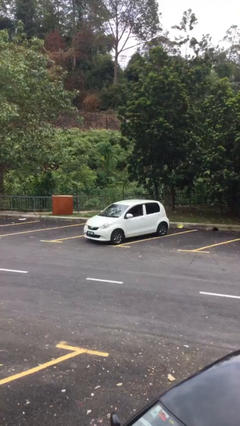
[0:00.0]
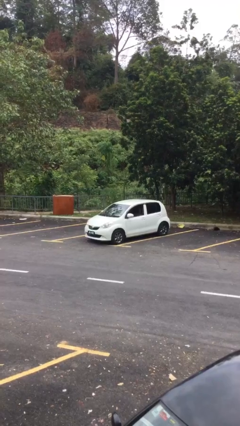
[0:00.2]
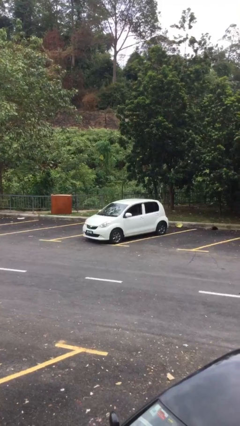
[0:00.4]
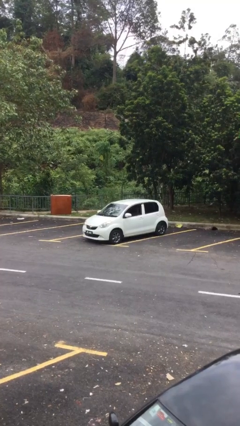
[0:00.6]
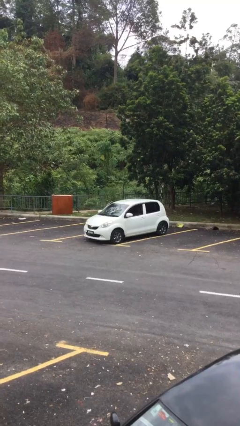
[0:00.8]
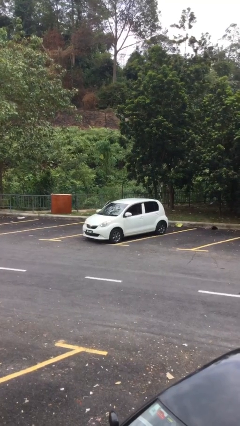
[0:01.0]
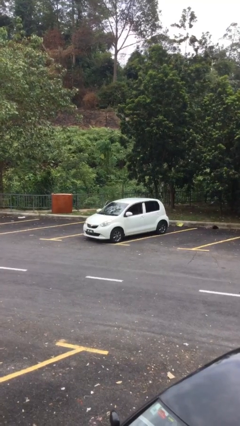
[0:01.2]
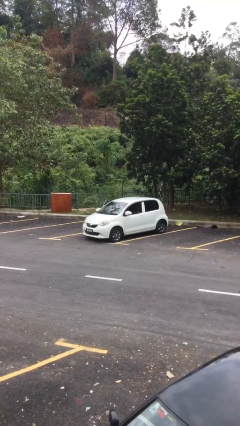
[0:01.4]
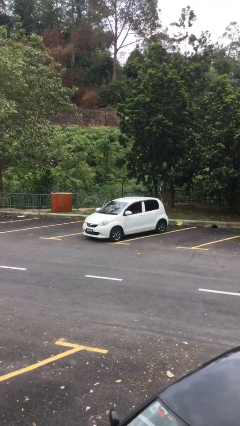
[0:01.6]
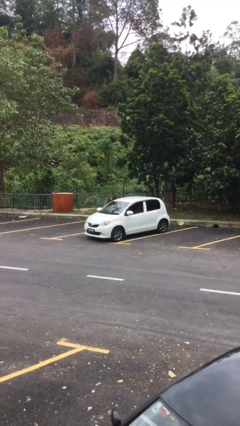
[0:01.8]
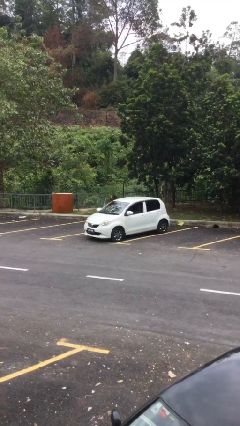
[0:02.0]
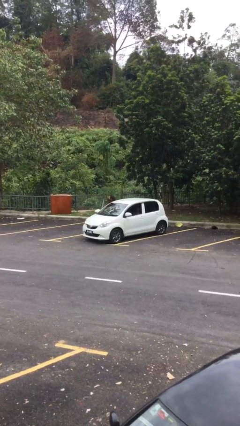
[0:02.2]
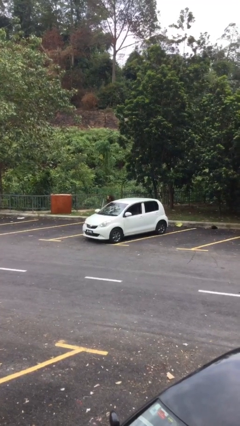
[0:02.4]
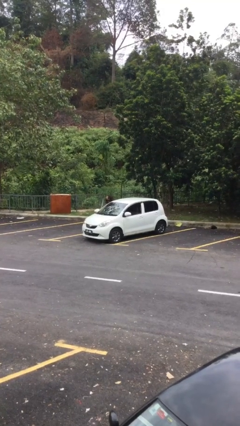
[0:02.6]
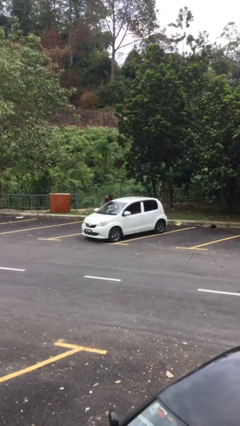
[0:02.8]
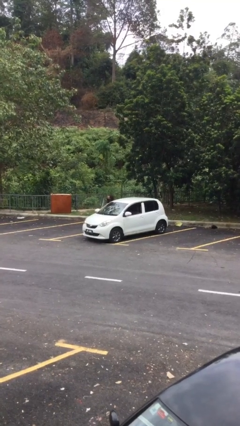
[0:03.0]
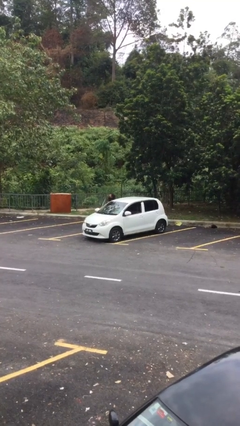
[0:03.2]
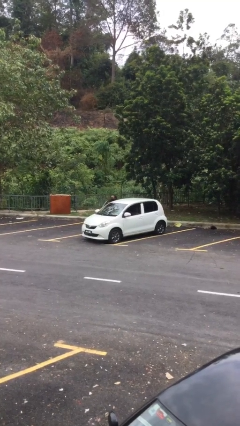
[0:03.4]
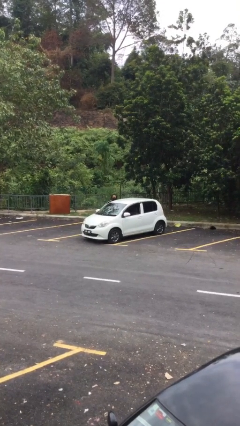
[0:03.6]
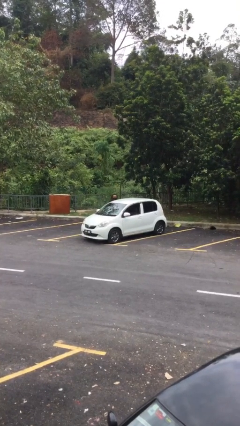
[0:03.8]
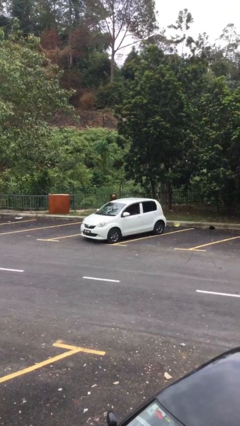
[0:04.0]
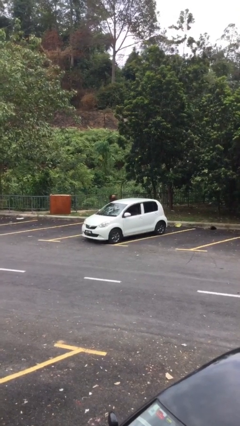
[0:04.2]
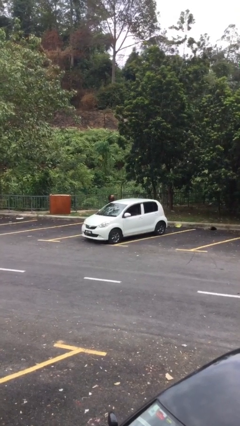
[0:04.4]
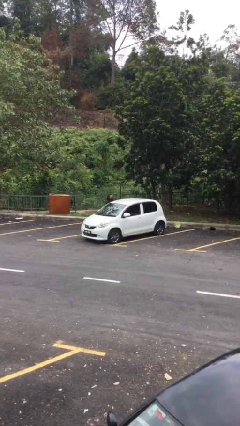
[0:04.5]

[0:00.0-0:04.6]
car drops off person

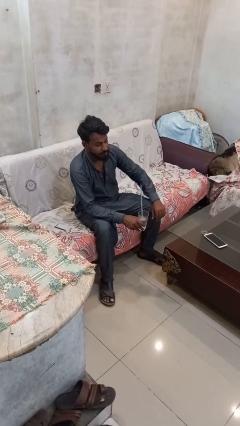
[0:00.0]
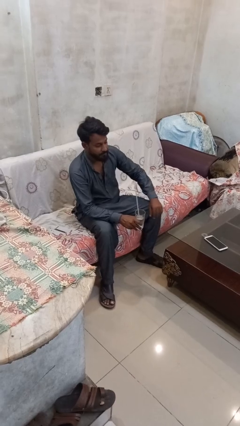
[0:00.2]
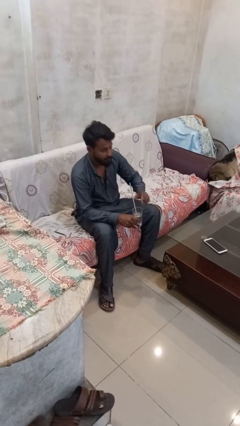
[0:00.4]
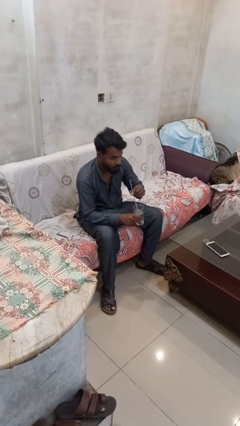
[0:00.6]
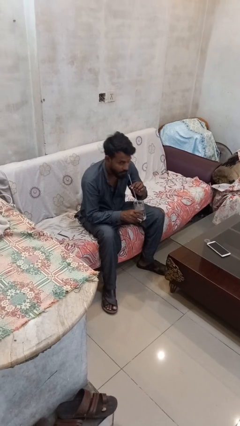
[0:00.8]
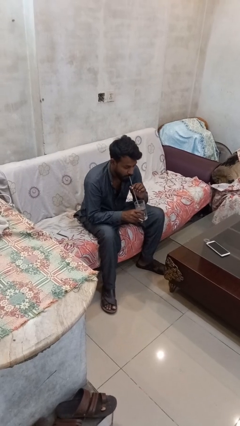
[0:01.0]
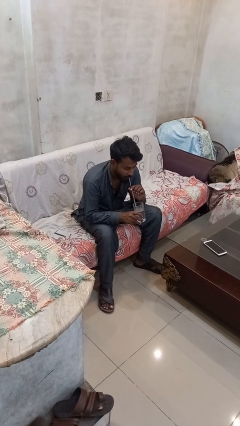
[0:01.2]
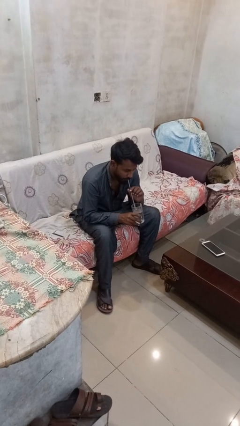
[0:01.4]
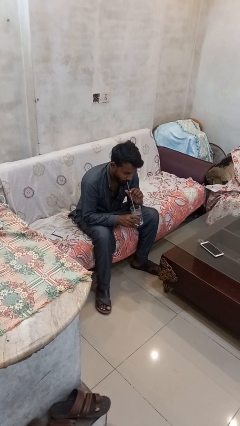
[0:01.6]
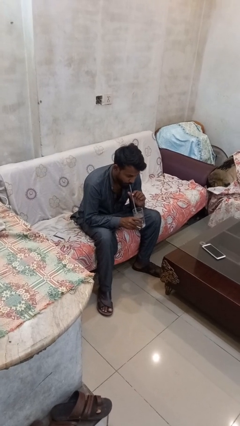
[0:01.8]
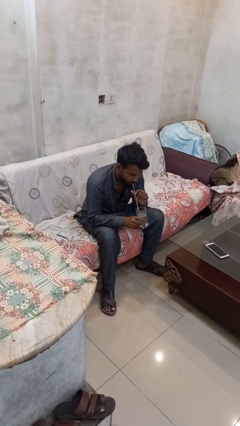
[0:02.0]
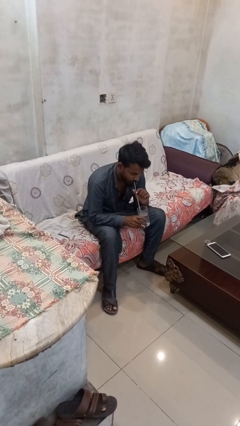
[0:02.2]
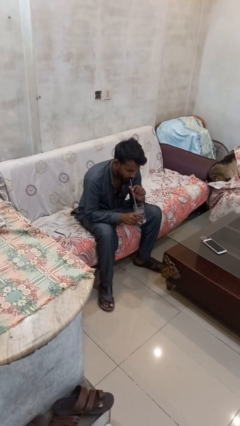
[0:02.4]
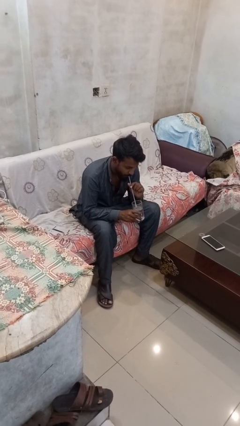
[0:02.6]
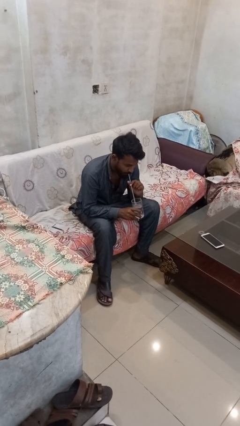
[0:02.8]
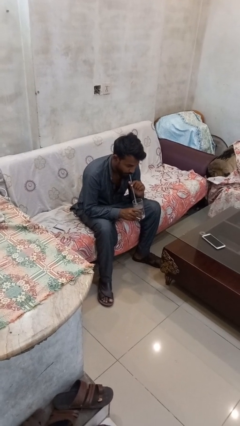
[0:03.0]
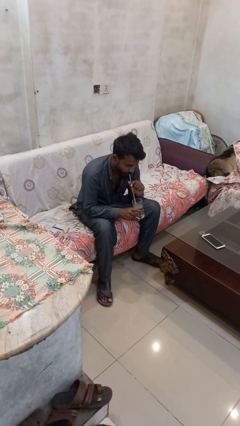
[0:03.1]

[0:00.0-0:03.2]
person drinks from straw

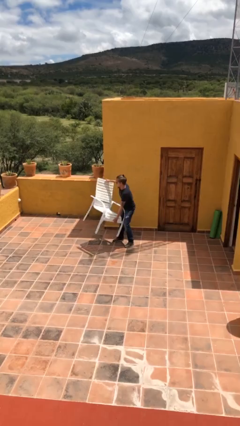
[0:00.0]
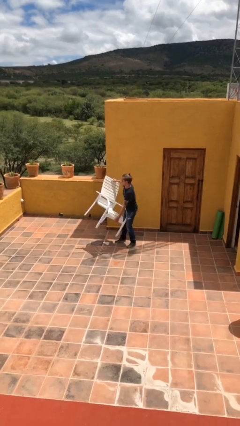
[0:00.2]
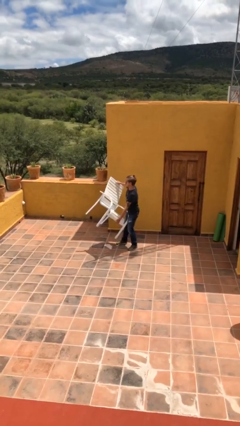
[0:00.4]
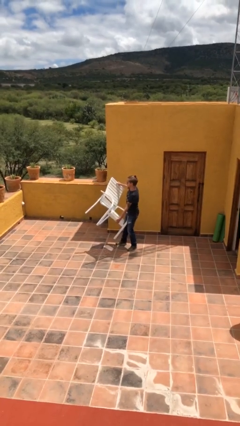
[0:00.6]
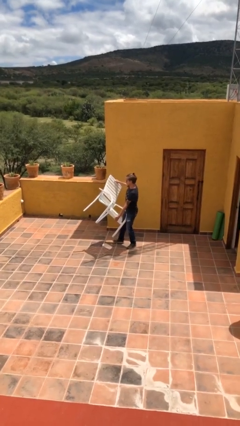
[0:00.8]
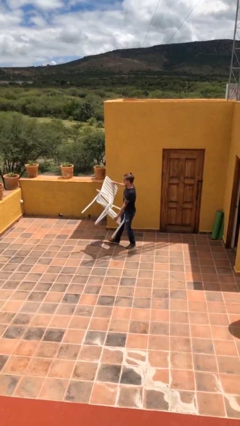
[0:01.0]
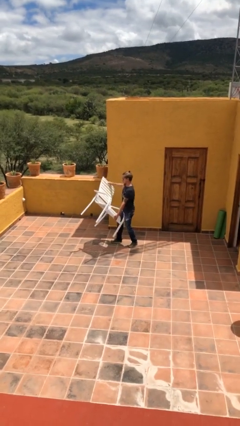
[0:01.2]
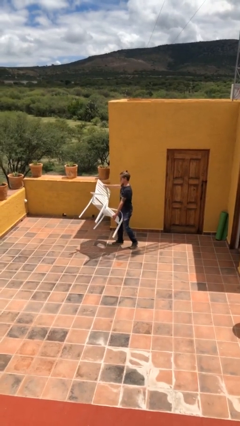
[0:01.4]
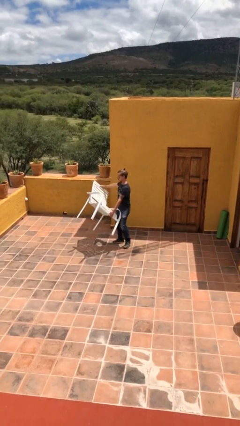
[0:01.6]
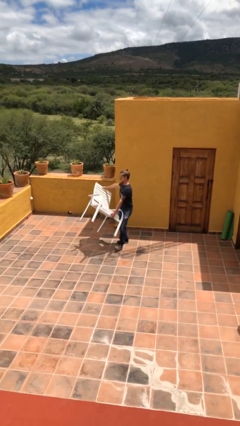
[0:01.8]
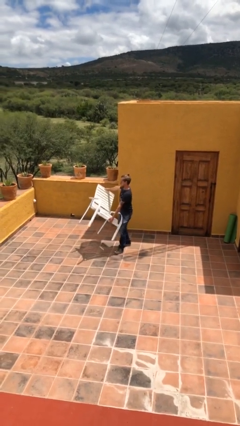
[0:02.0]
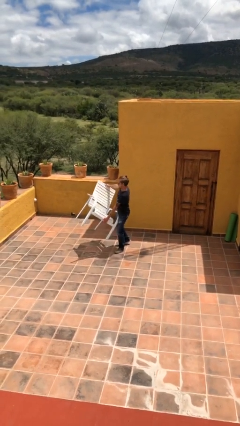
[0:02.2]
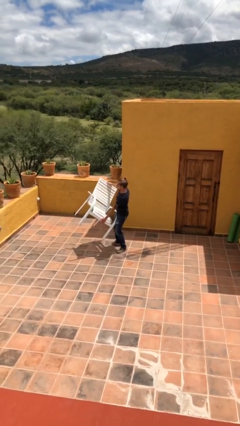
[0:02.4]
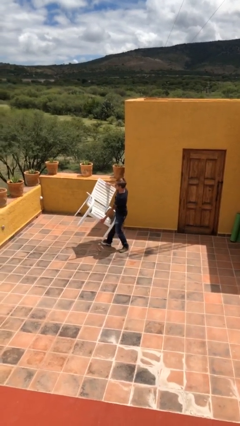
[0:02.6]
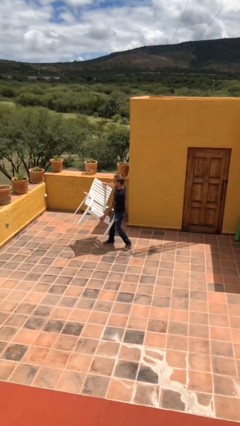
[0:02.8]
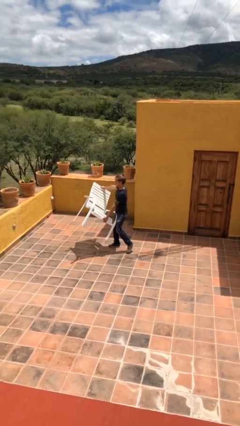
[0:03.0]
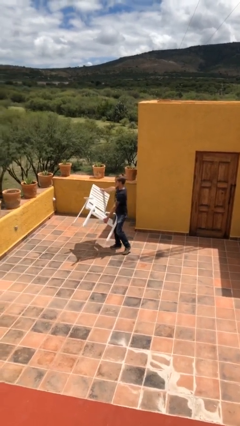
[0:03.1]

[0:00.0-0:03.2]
person carries heavy object

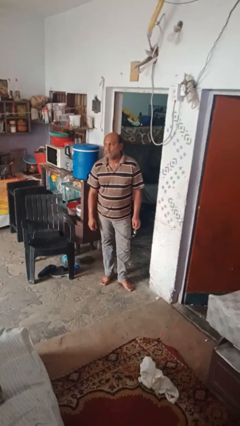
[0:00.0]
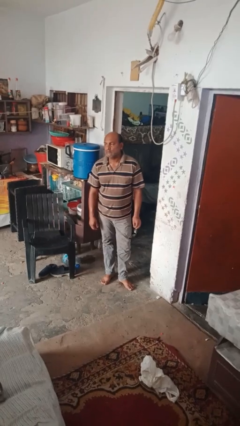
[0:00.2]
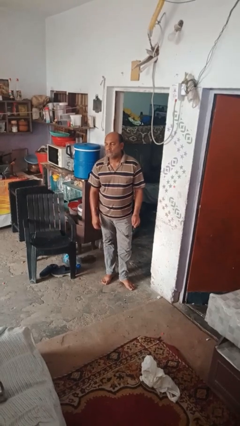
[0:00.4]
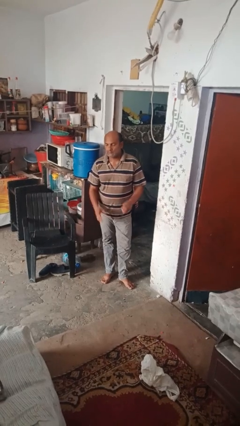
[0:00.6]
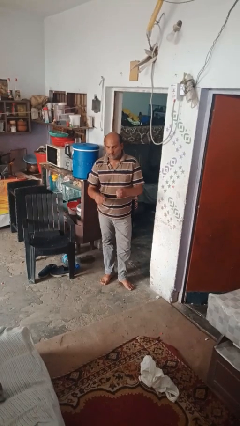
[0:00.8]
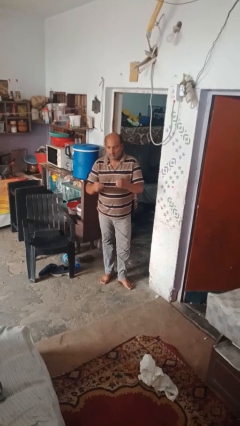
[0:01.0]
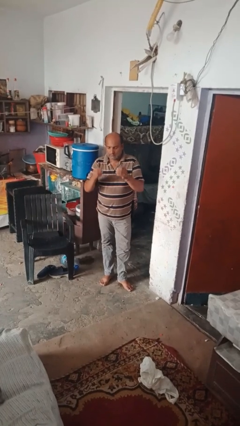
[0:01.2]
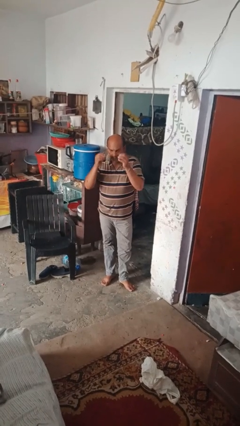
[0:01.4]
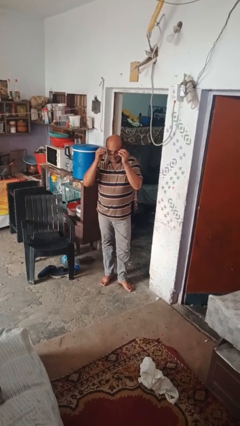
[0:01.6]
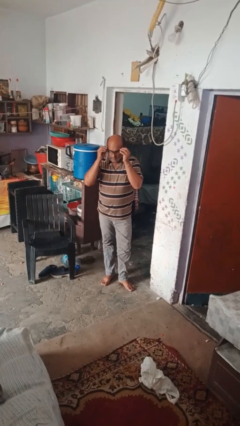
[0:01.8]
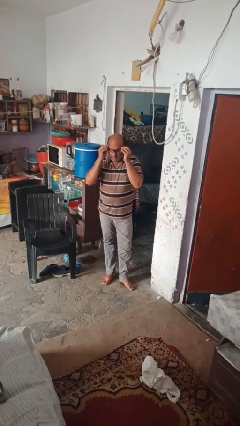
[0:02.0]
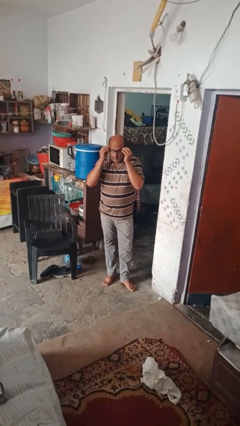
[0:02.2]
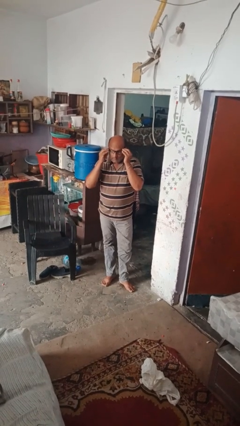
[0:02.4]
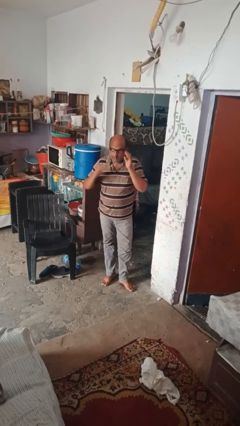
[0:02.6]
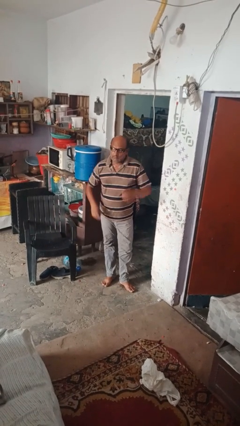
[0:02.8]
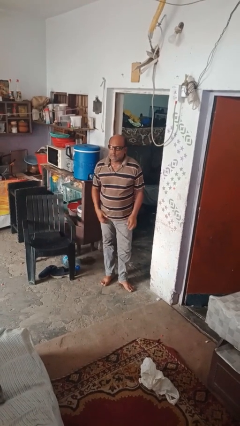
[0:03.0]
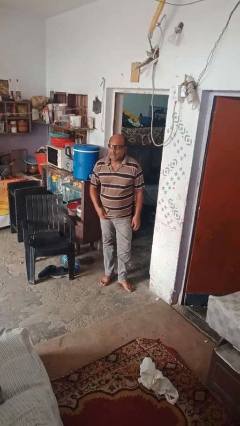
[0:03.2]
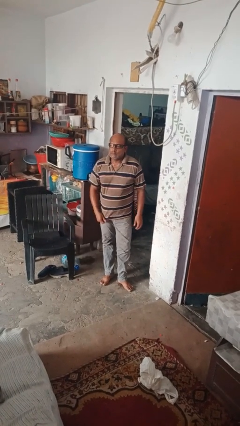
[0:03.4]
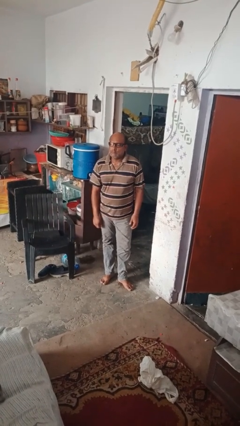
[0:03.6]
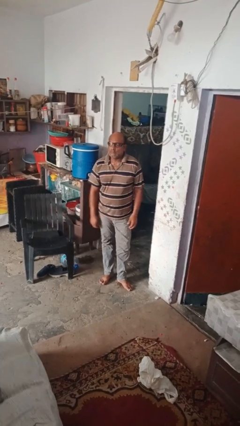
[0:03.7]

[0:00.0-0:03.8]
person puts on glasses

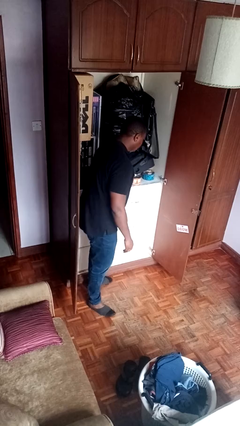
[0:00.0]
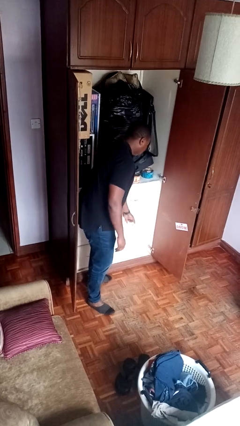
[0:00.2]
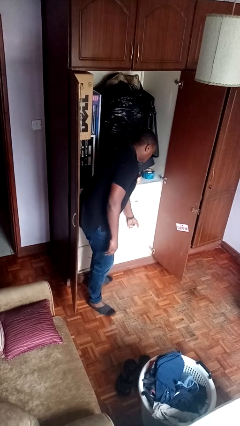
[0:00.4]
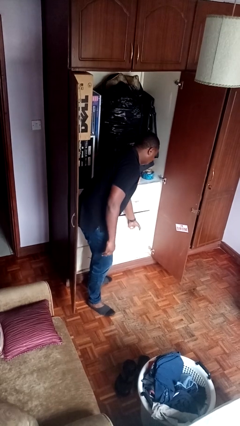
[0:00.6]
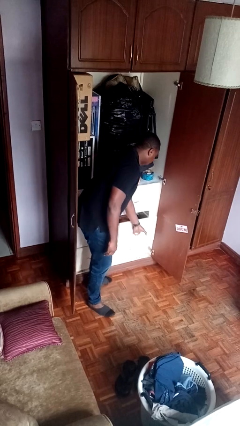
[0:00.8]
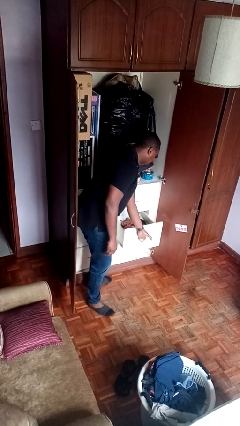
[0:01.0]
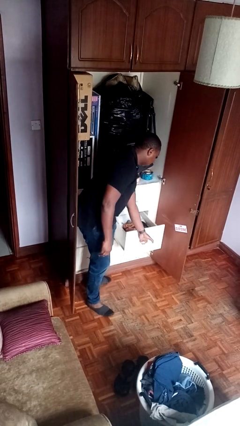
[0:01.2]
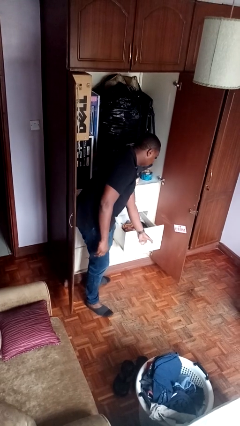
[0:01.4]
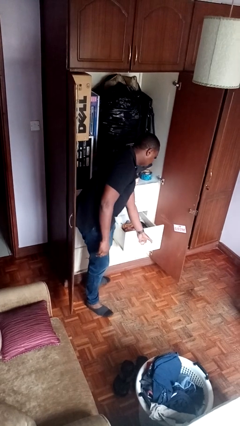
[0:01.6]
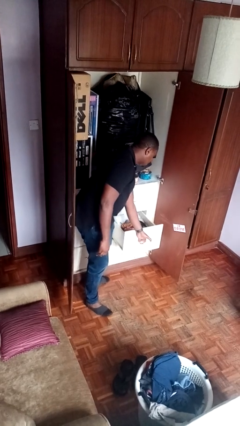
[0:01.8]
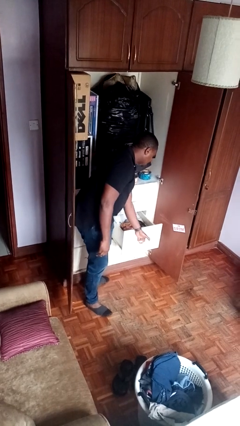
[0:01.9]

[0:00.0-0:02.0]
person opens dresser drawer

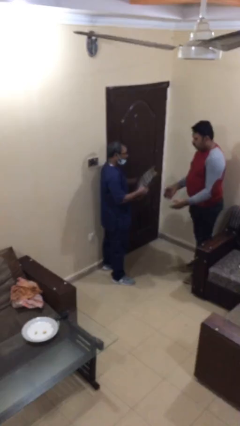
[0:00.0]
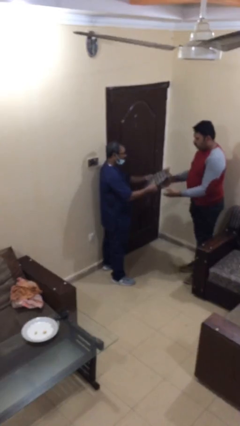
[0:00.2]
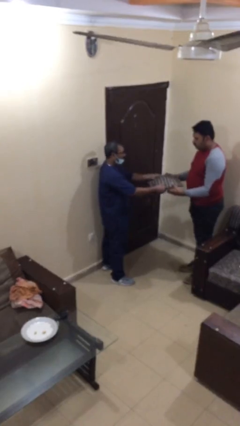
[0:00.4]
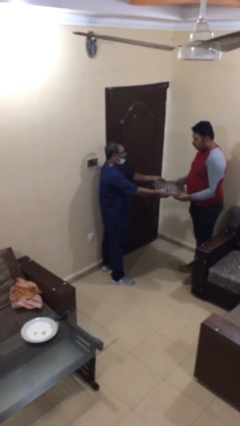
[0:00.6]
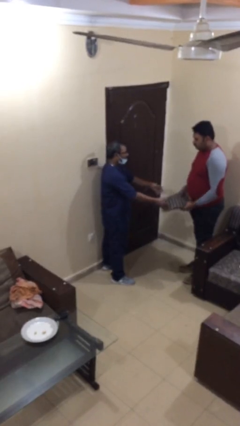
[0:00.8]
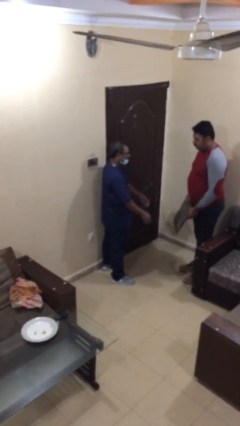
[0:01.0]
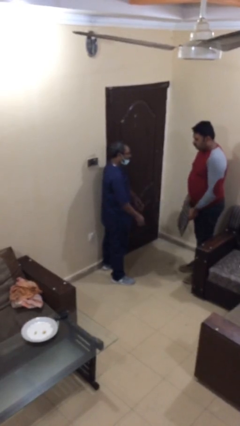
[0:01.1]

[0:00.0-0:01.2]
person transfers object to person
